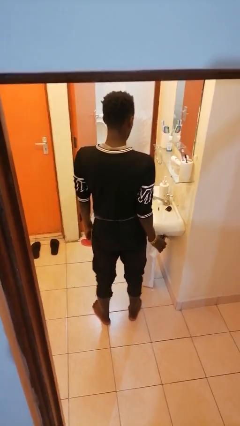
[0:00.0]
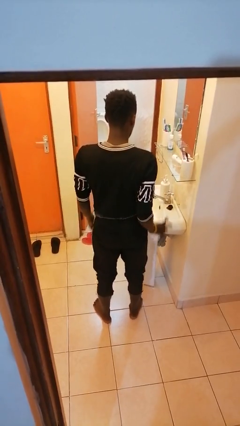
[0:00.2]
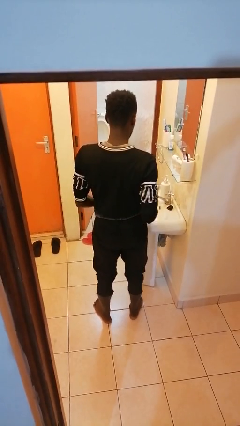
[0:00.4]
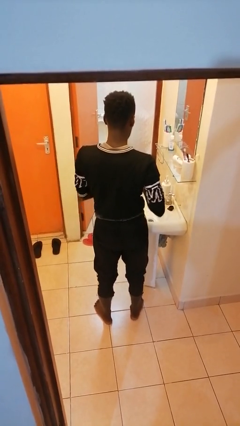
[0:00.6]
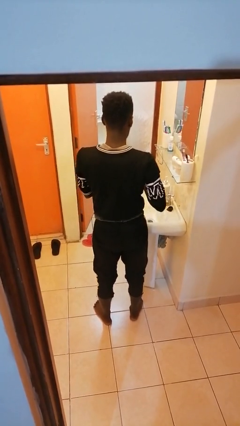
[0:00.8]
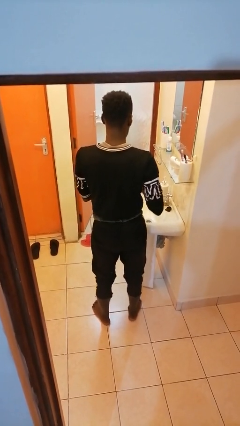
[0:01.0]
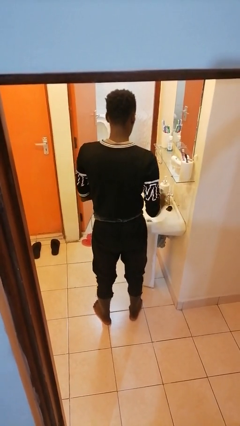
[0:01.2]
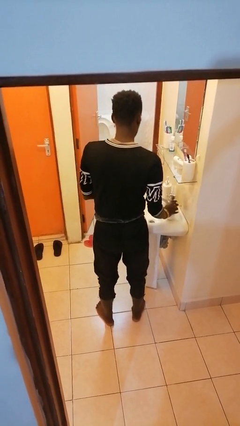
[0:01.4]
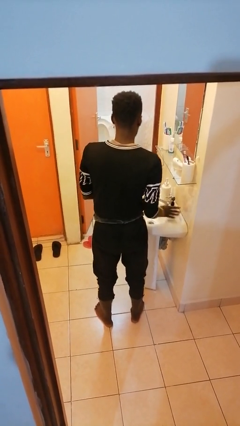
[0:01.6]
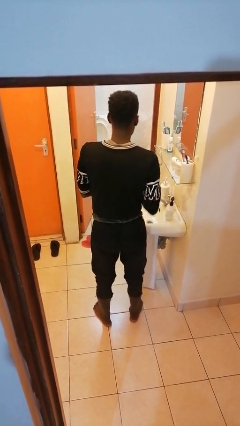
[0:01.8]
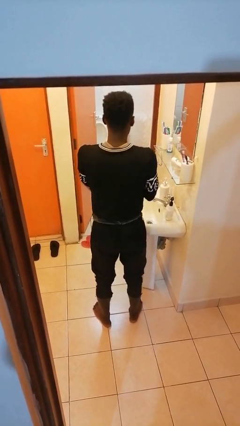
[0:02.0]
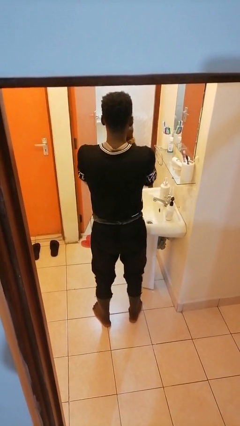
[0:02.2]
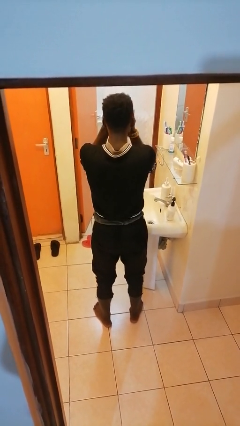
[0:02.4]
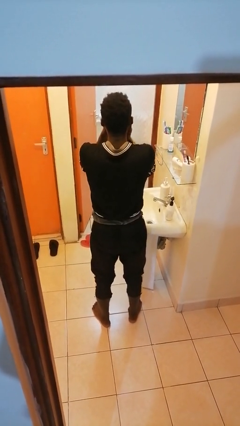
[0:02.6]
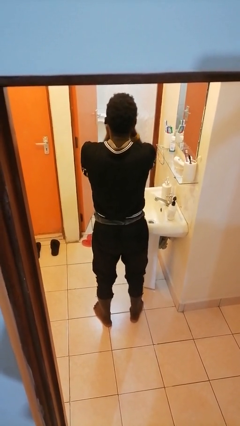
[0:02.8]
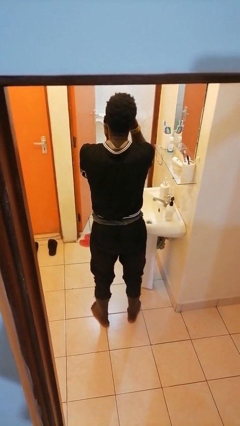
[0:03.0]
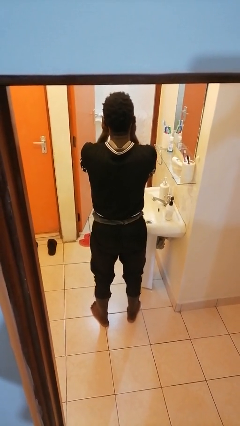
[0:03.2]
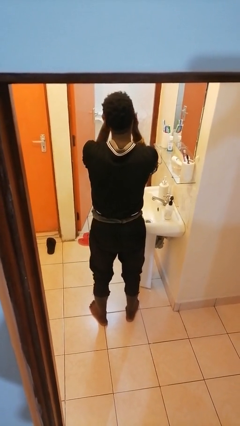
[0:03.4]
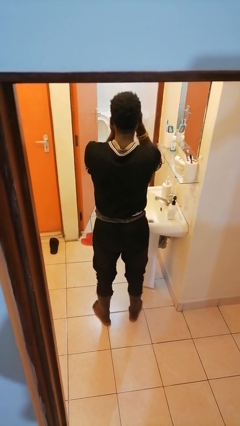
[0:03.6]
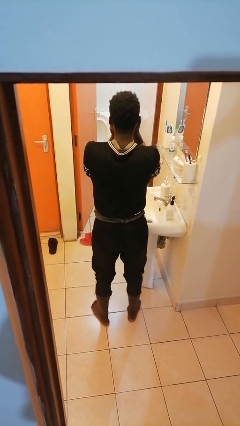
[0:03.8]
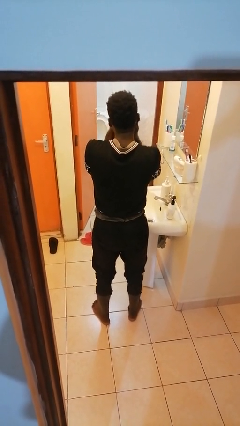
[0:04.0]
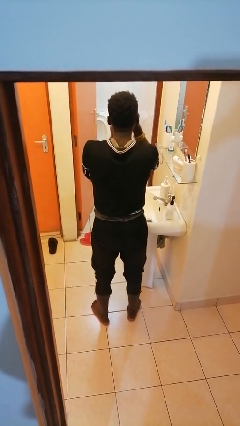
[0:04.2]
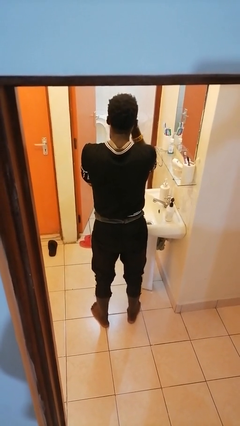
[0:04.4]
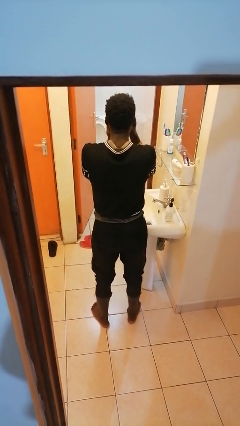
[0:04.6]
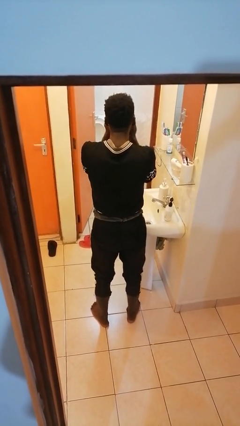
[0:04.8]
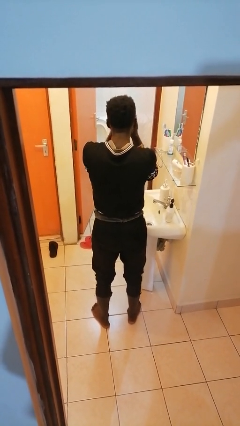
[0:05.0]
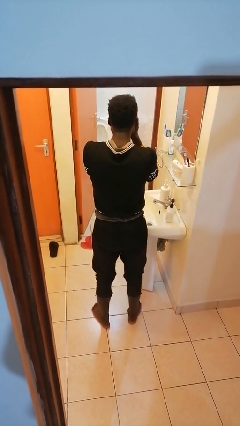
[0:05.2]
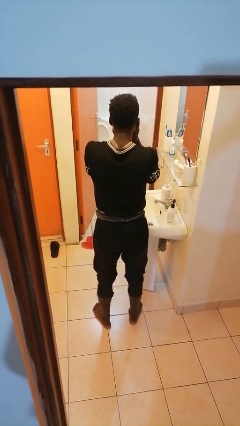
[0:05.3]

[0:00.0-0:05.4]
person applies facial moisturizer

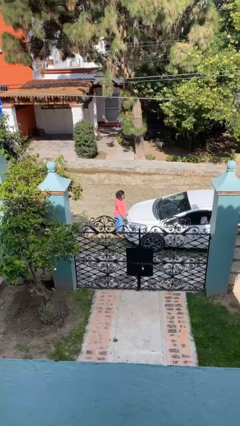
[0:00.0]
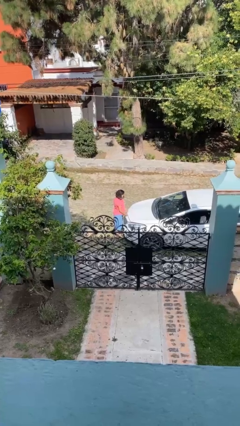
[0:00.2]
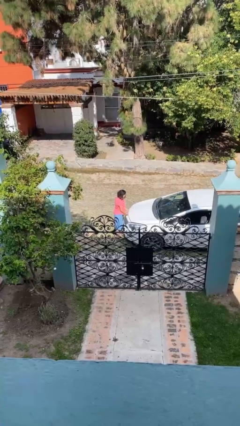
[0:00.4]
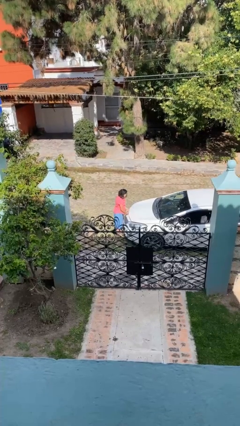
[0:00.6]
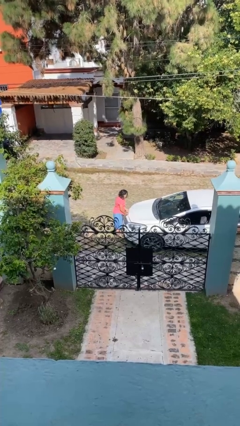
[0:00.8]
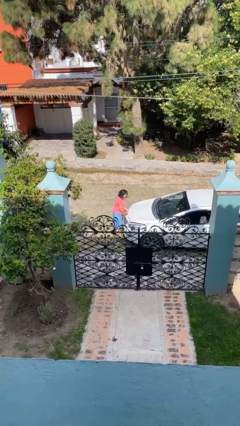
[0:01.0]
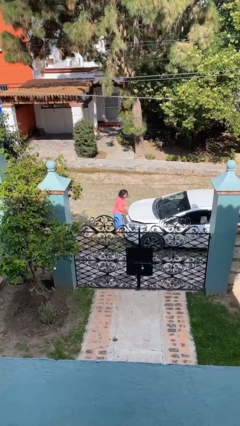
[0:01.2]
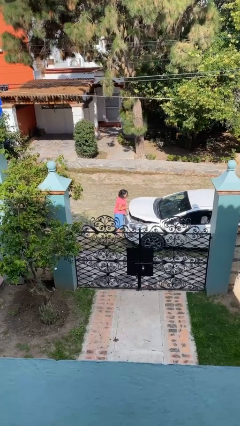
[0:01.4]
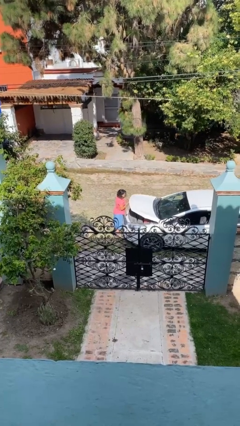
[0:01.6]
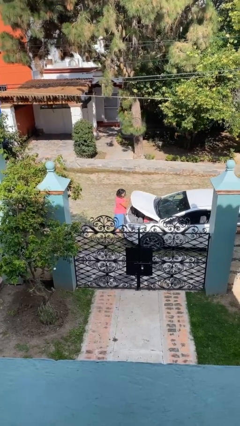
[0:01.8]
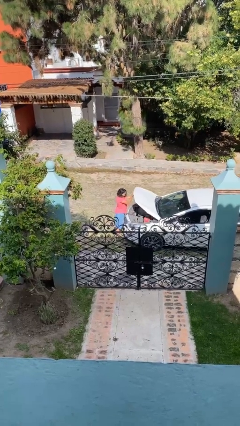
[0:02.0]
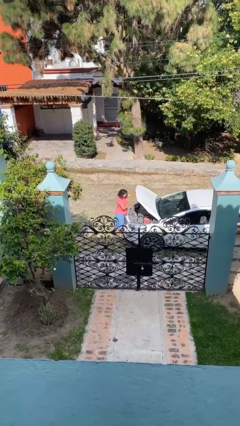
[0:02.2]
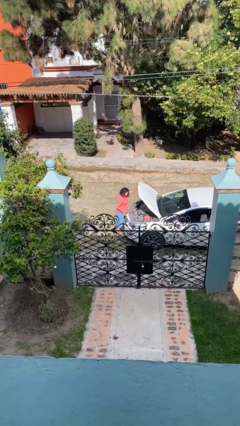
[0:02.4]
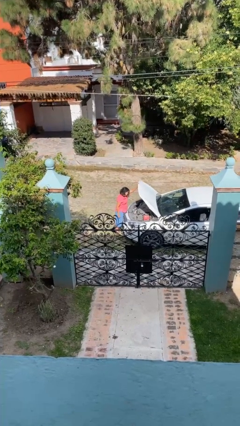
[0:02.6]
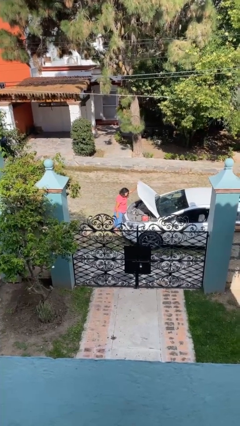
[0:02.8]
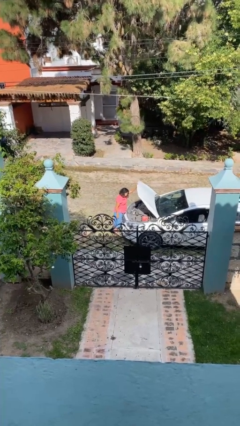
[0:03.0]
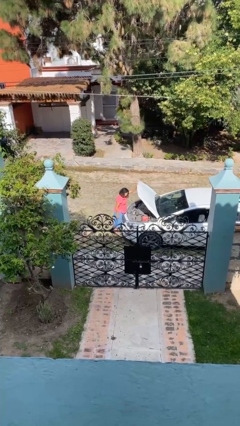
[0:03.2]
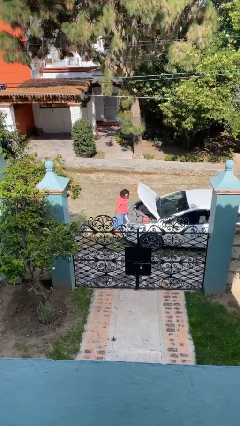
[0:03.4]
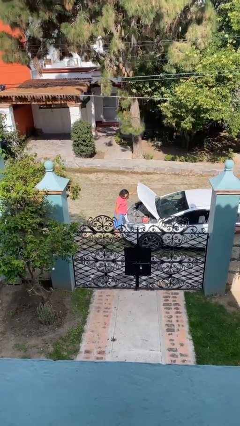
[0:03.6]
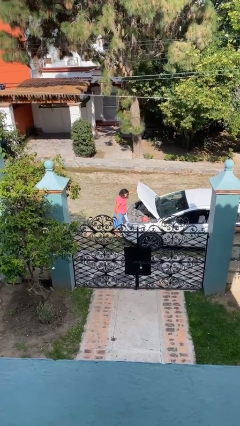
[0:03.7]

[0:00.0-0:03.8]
person opens car hood

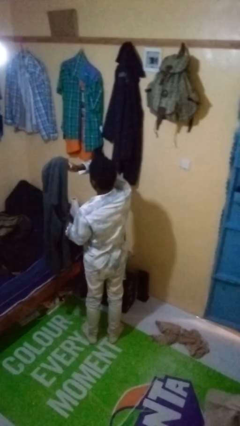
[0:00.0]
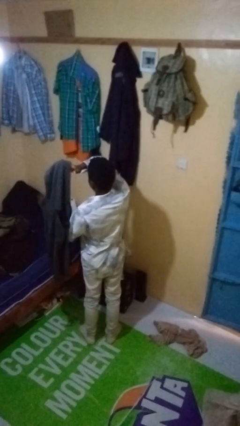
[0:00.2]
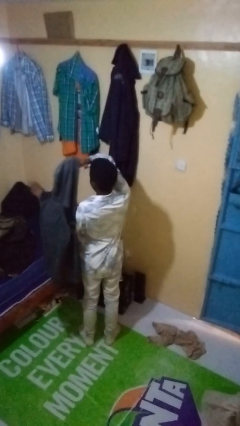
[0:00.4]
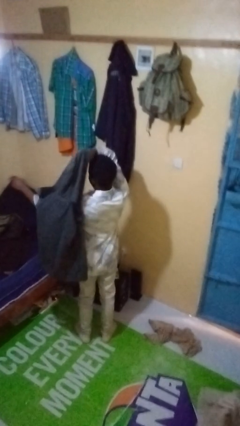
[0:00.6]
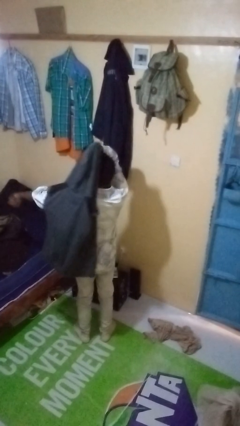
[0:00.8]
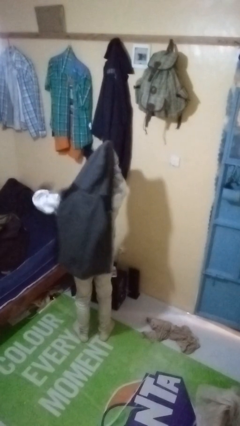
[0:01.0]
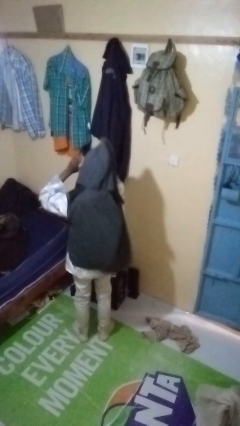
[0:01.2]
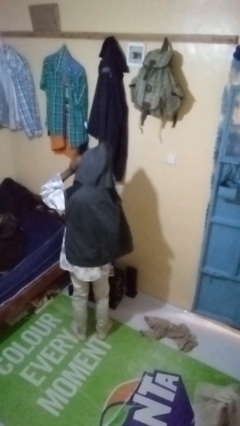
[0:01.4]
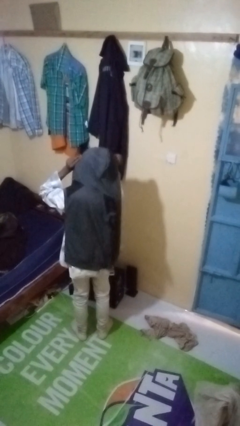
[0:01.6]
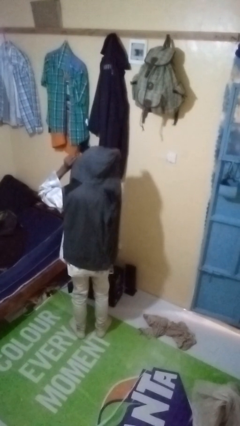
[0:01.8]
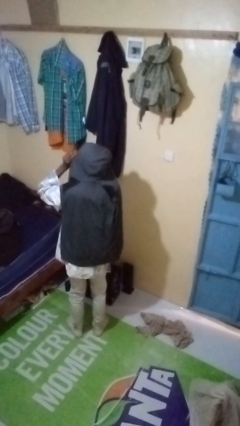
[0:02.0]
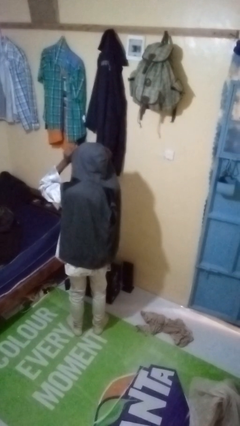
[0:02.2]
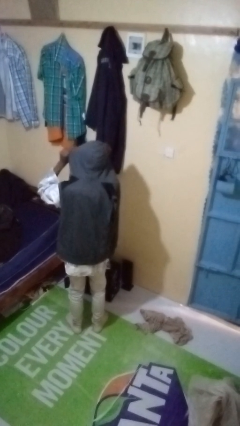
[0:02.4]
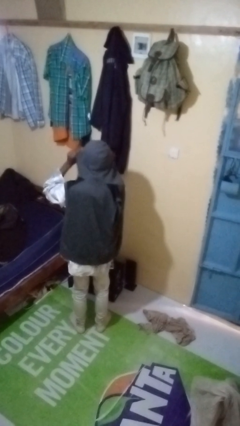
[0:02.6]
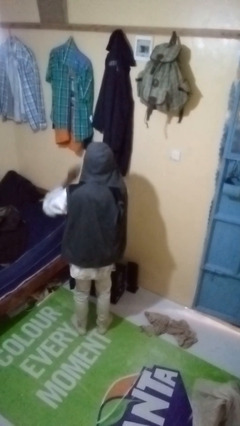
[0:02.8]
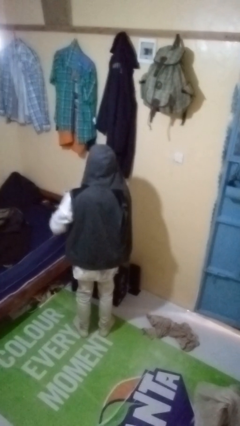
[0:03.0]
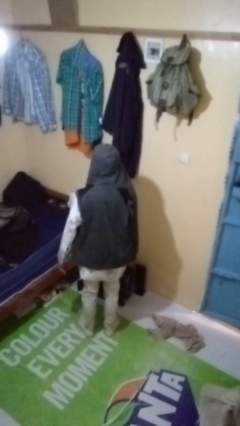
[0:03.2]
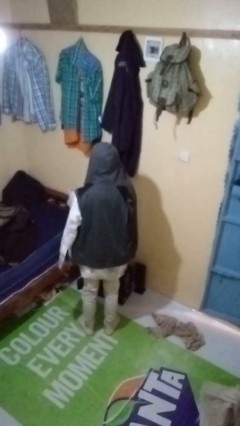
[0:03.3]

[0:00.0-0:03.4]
person puts on hoodie

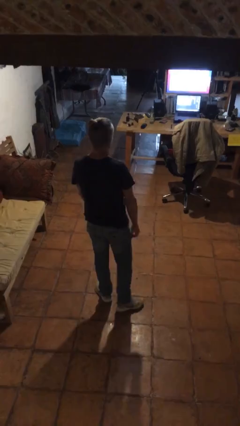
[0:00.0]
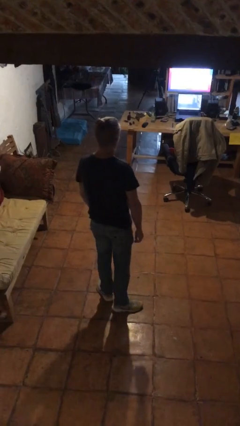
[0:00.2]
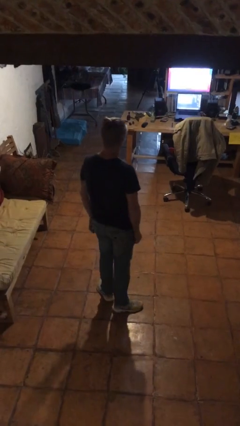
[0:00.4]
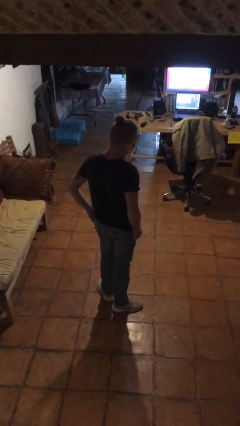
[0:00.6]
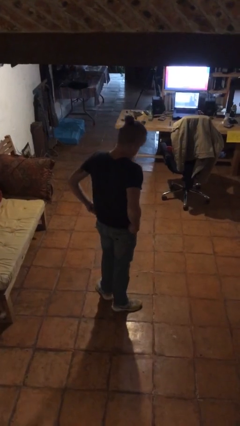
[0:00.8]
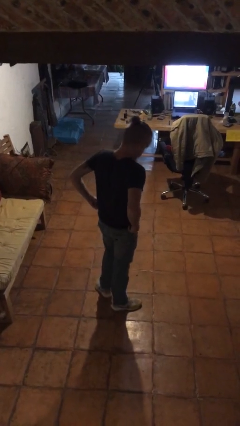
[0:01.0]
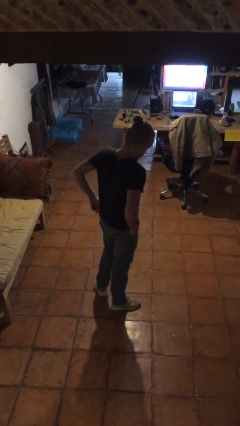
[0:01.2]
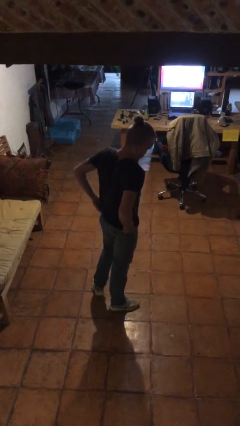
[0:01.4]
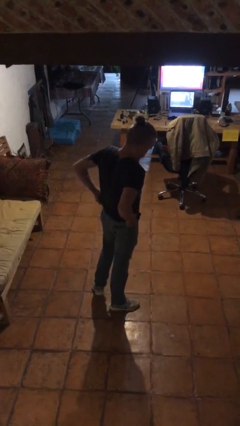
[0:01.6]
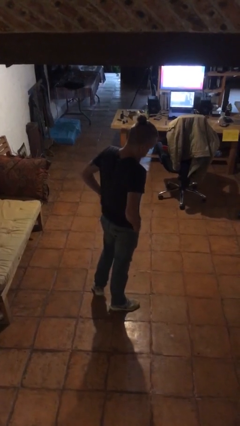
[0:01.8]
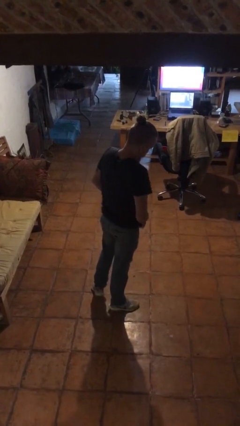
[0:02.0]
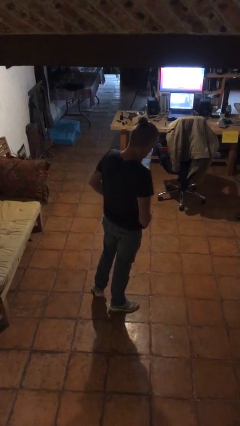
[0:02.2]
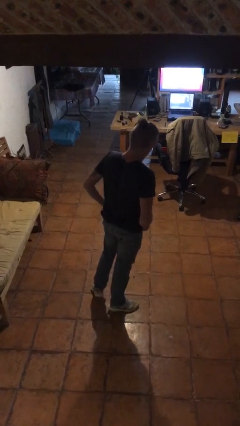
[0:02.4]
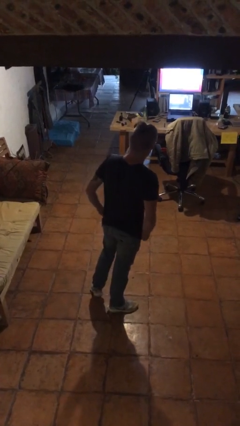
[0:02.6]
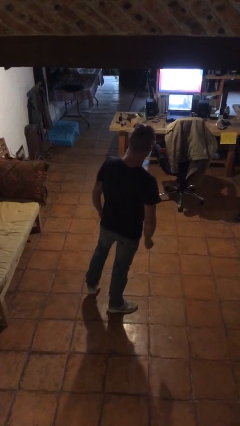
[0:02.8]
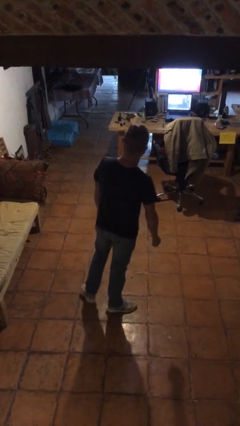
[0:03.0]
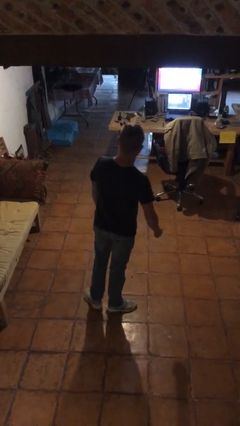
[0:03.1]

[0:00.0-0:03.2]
person hikes up pants

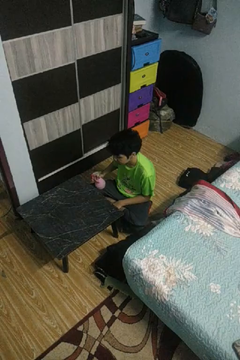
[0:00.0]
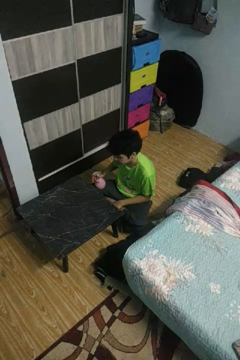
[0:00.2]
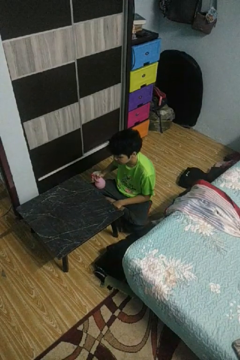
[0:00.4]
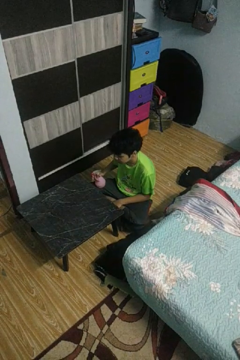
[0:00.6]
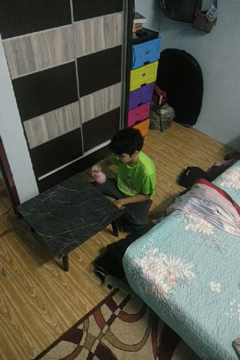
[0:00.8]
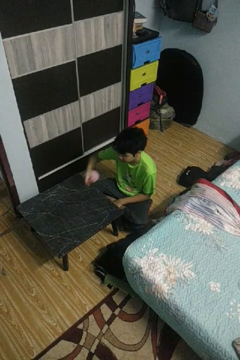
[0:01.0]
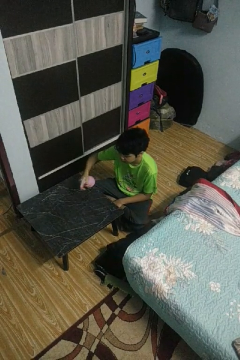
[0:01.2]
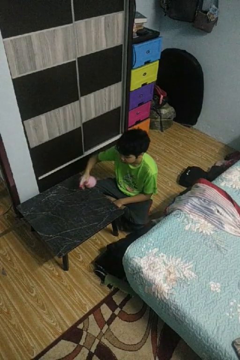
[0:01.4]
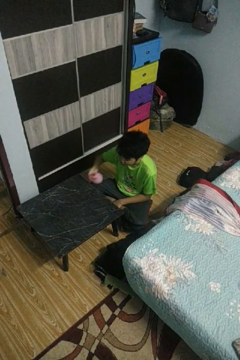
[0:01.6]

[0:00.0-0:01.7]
person sprays from bottle
